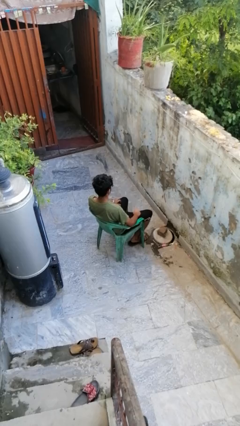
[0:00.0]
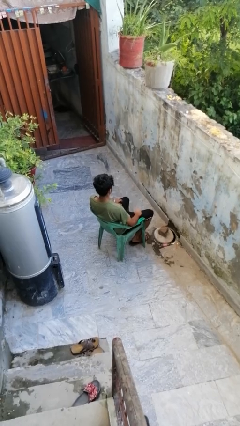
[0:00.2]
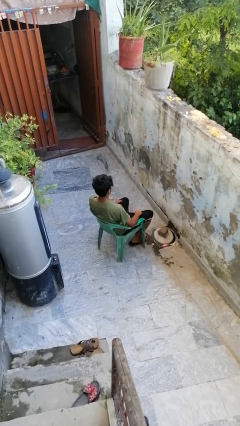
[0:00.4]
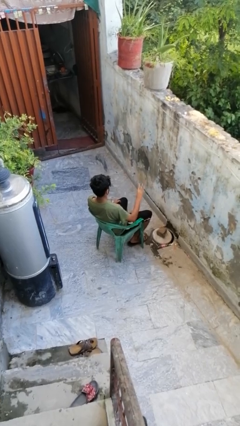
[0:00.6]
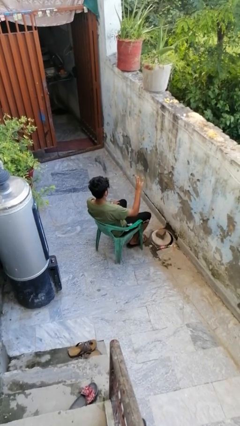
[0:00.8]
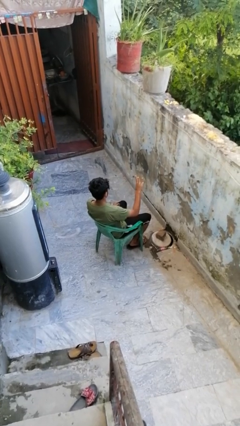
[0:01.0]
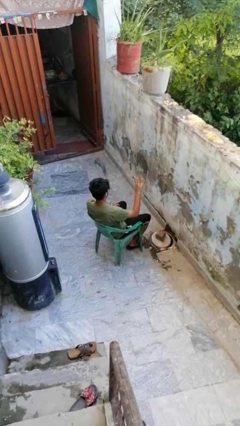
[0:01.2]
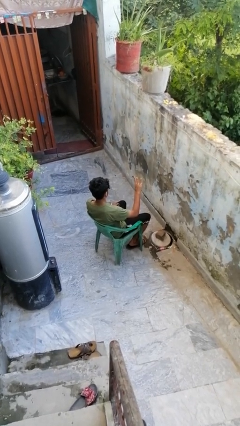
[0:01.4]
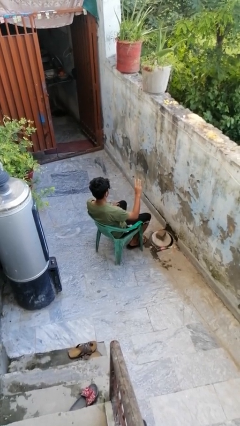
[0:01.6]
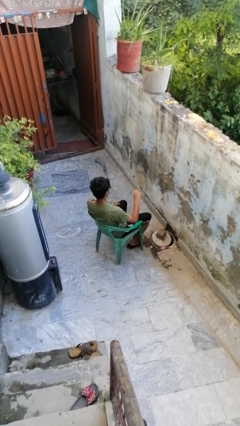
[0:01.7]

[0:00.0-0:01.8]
person gestures number three

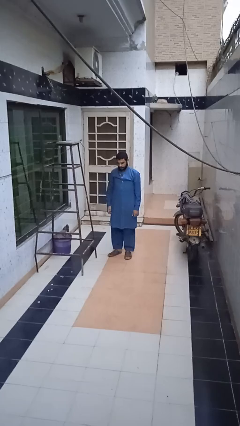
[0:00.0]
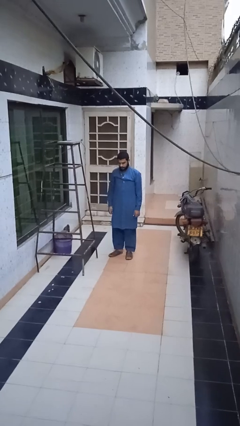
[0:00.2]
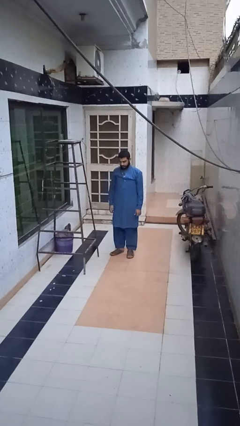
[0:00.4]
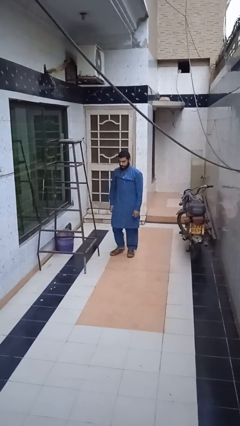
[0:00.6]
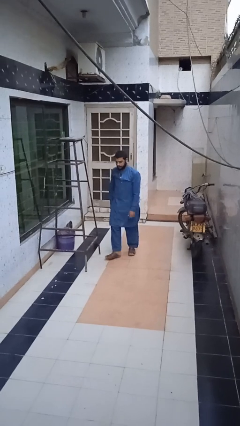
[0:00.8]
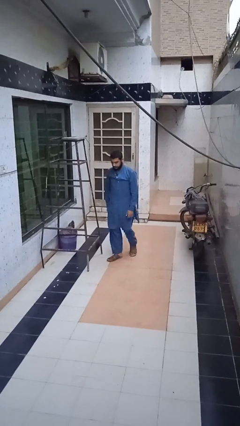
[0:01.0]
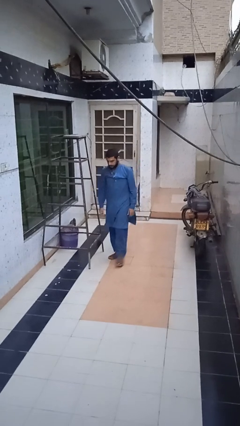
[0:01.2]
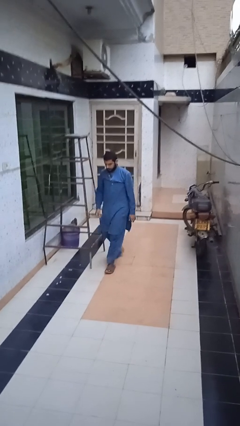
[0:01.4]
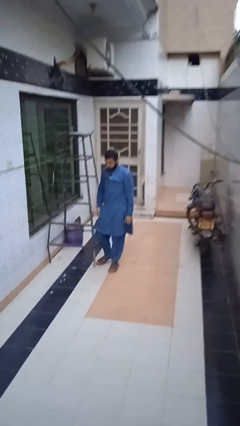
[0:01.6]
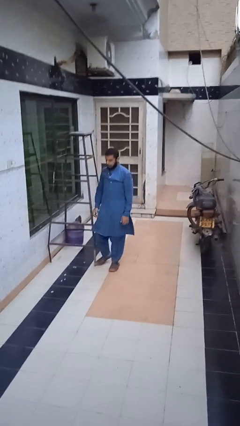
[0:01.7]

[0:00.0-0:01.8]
person trips on object on floor

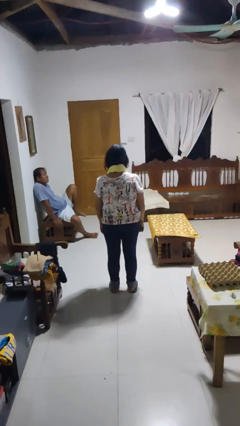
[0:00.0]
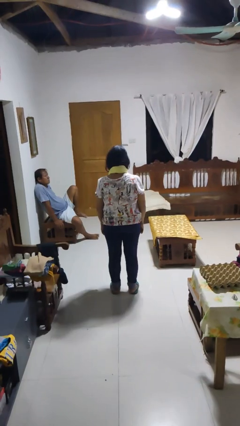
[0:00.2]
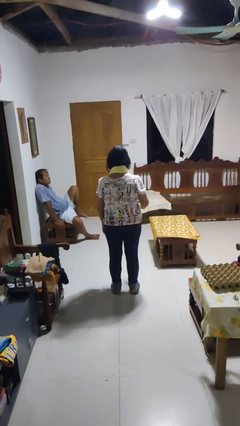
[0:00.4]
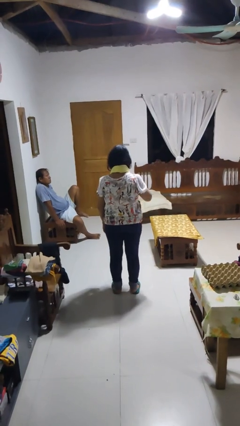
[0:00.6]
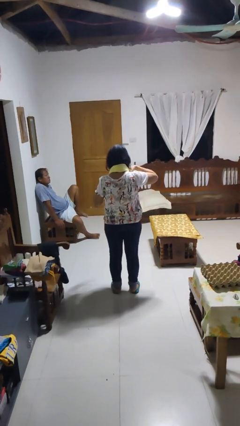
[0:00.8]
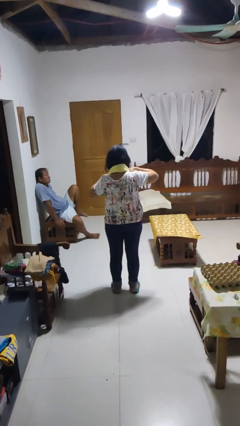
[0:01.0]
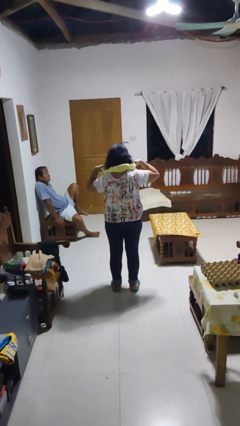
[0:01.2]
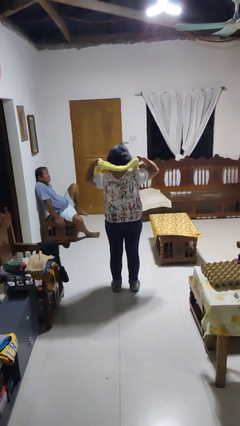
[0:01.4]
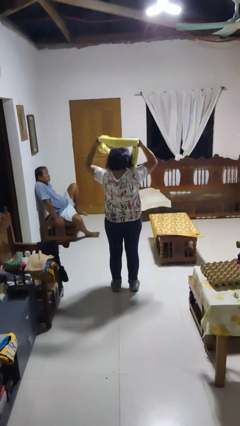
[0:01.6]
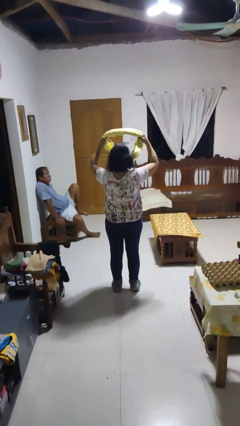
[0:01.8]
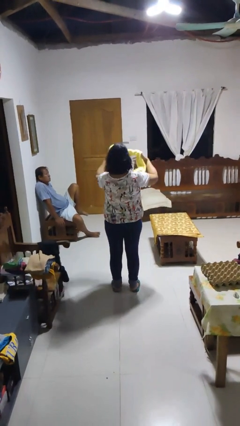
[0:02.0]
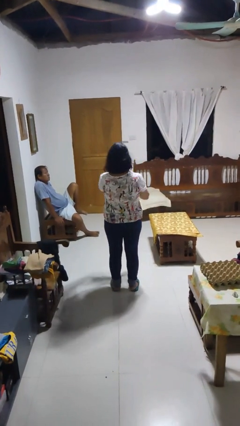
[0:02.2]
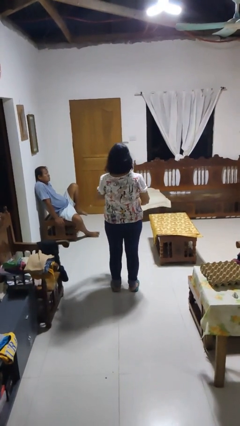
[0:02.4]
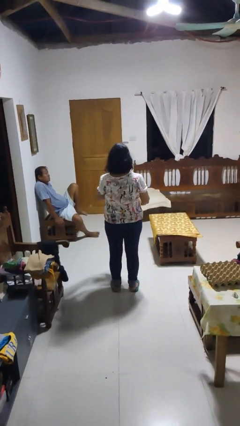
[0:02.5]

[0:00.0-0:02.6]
person takes off scarf

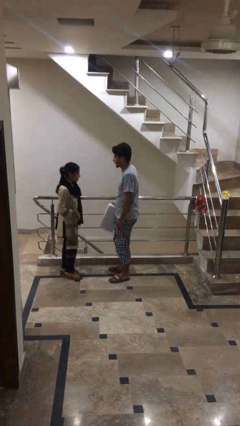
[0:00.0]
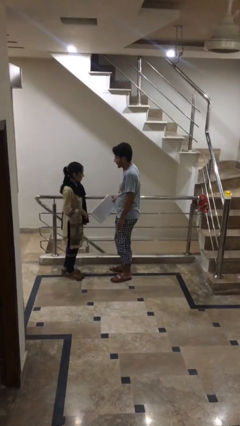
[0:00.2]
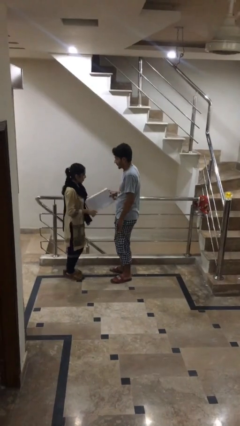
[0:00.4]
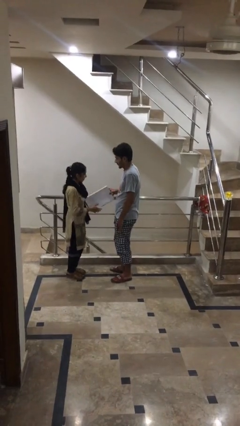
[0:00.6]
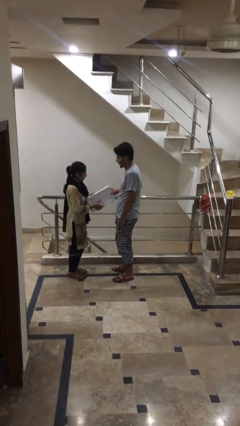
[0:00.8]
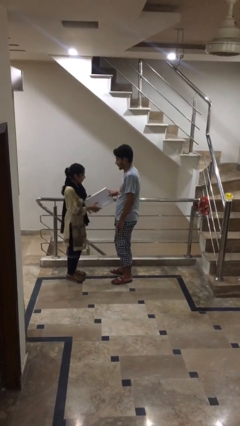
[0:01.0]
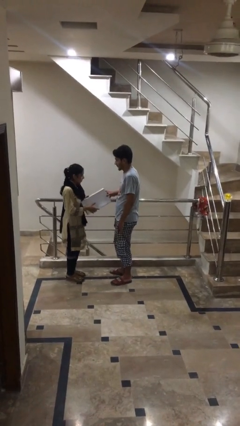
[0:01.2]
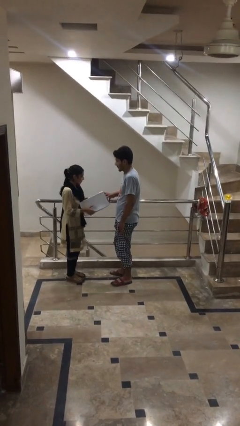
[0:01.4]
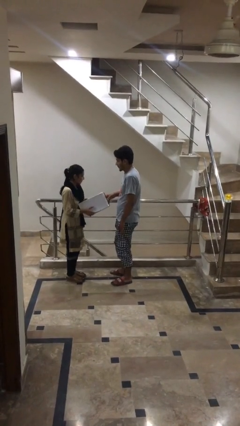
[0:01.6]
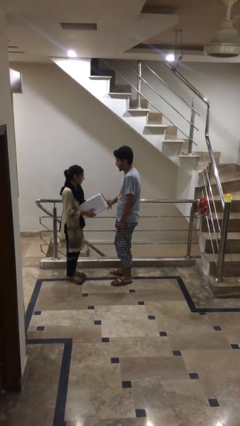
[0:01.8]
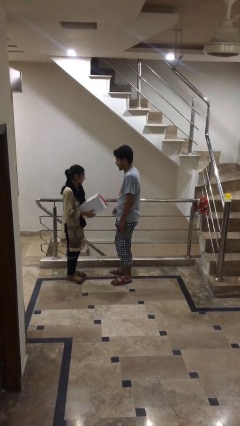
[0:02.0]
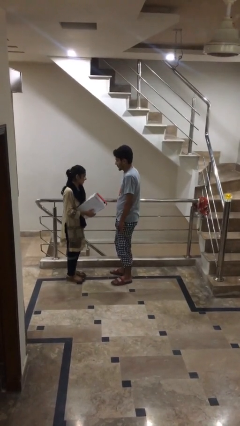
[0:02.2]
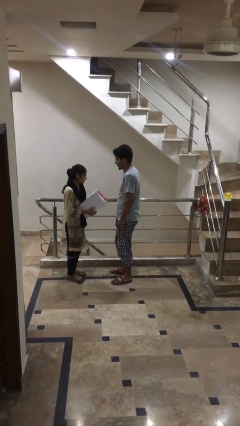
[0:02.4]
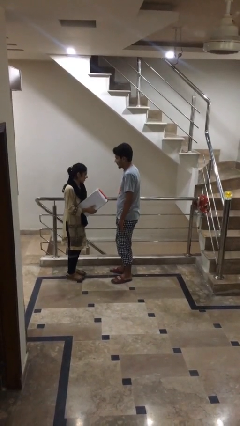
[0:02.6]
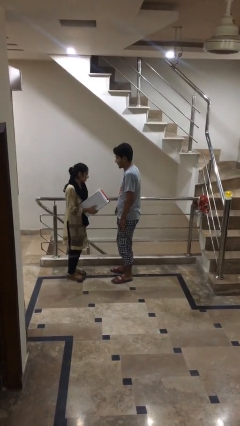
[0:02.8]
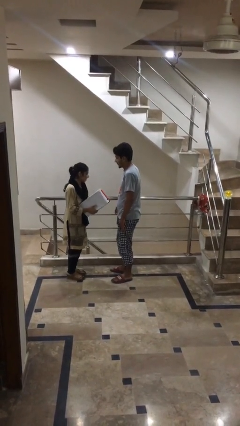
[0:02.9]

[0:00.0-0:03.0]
person transfers object to person

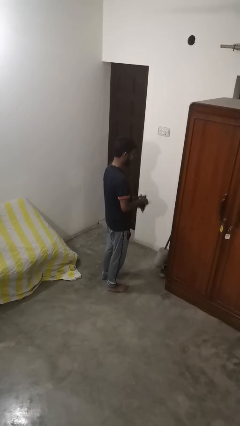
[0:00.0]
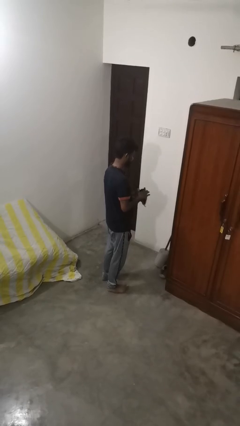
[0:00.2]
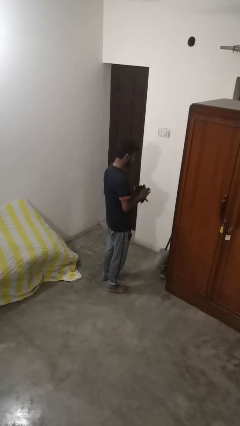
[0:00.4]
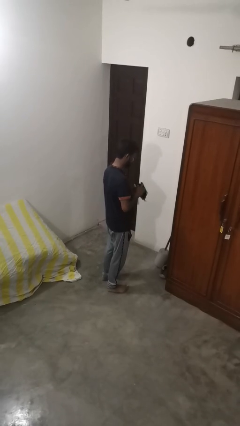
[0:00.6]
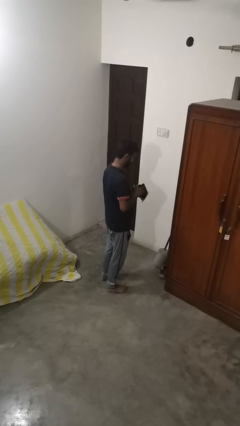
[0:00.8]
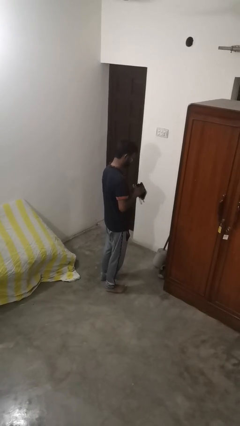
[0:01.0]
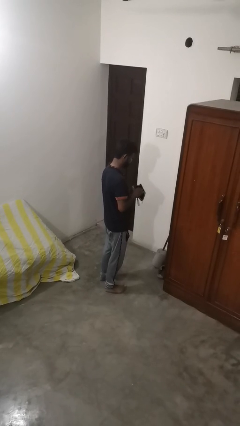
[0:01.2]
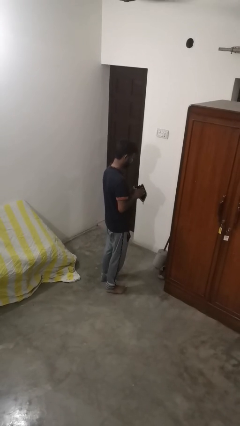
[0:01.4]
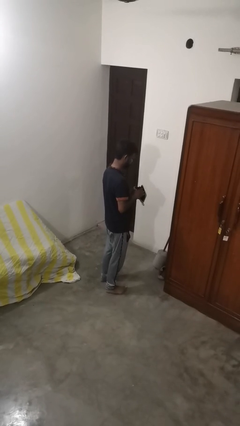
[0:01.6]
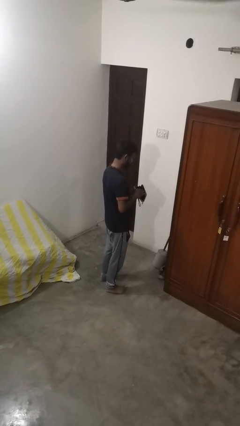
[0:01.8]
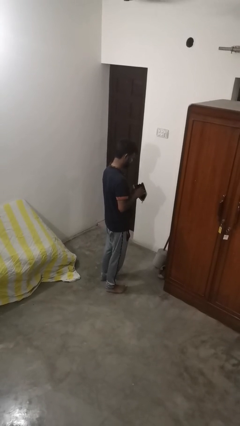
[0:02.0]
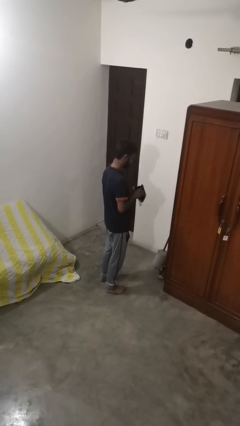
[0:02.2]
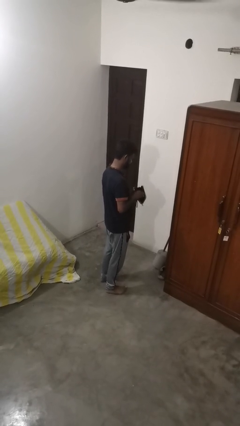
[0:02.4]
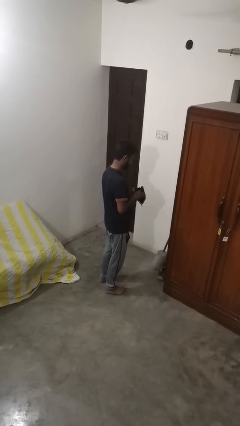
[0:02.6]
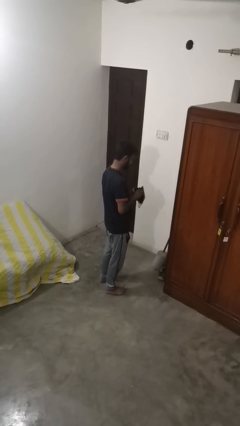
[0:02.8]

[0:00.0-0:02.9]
person searches in purse

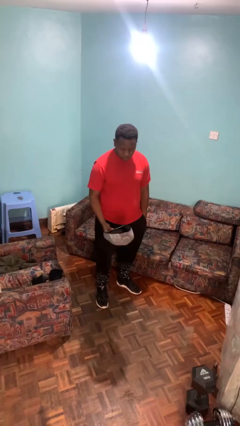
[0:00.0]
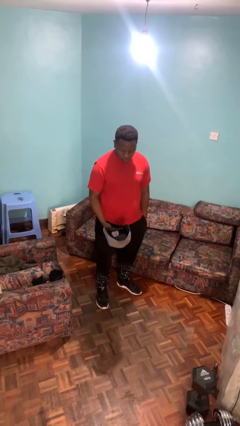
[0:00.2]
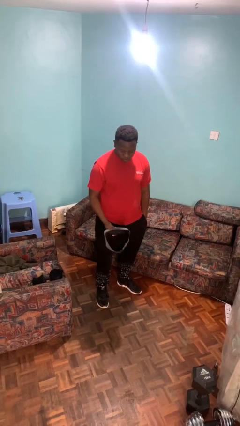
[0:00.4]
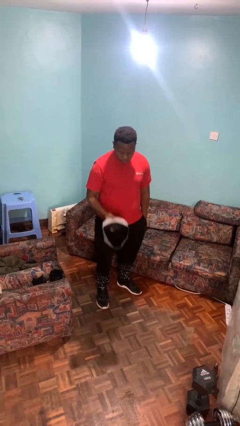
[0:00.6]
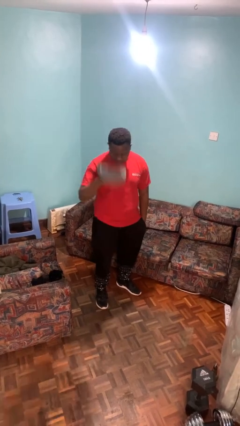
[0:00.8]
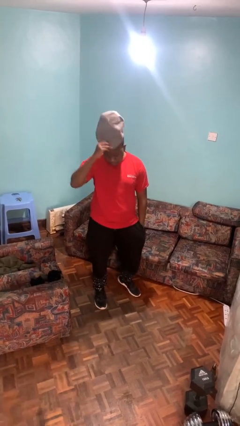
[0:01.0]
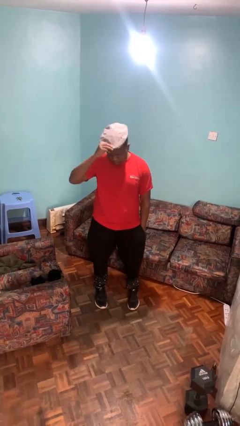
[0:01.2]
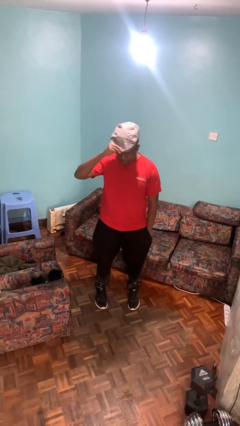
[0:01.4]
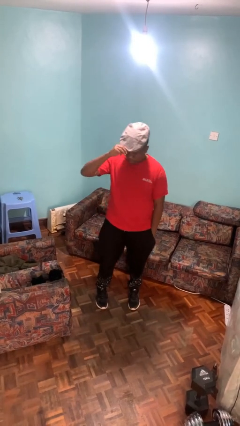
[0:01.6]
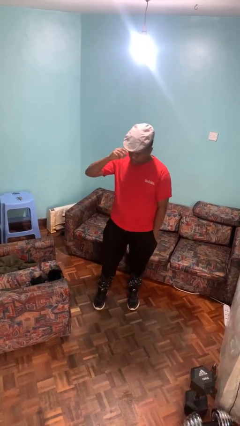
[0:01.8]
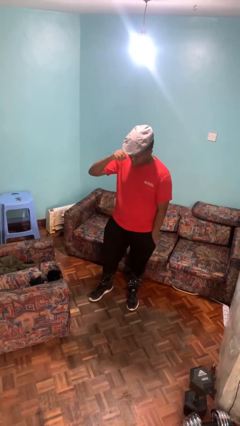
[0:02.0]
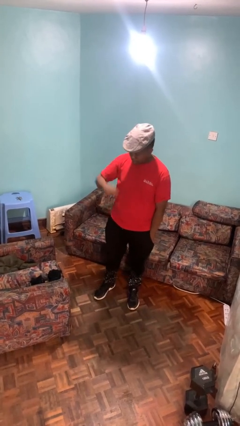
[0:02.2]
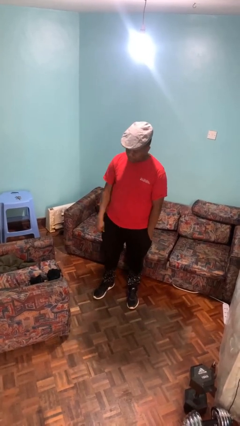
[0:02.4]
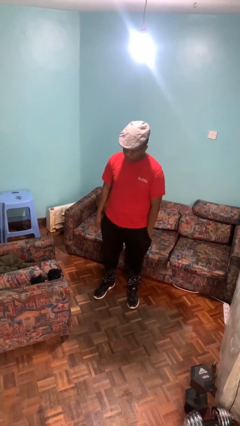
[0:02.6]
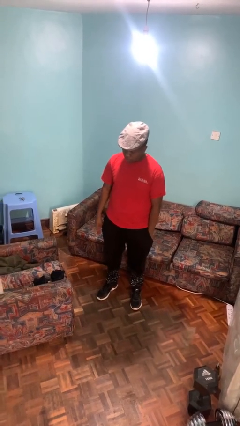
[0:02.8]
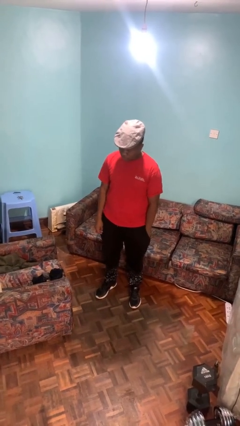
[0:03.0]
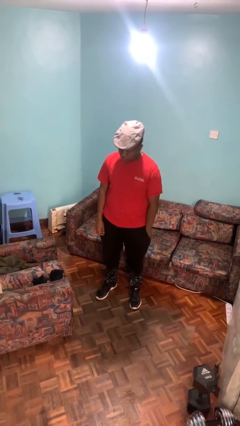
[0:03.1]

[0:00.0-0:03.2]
person puts on hat

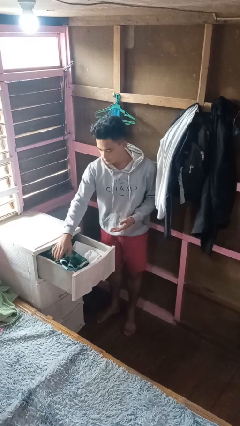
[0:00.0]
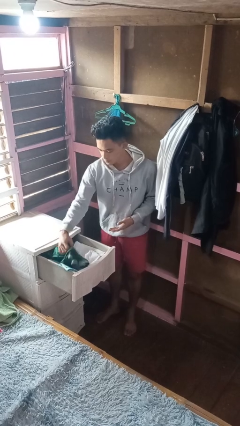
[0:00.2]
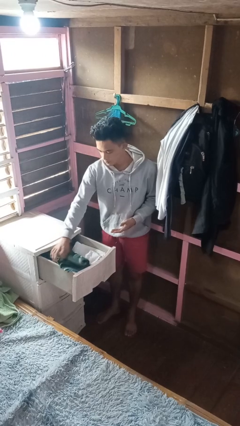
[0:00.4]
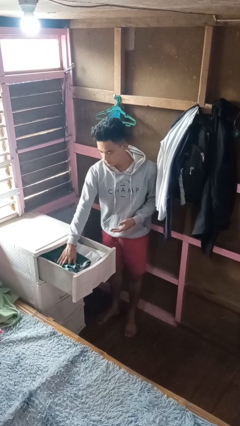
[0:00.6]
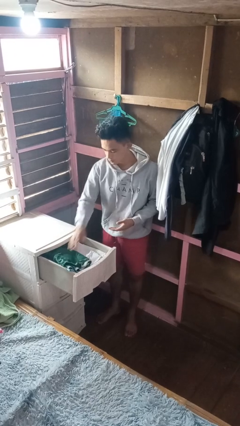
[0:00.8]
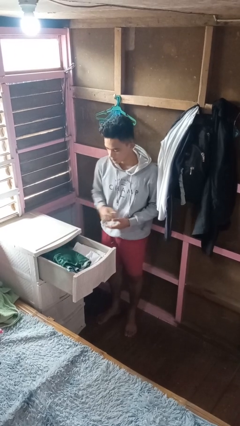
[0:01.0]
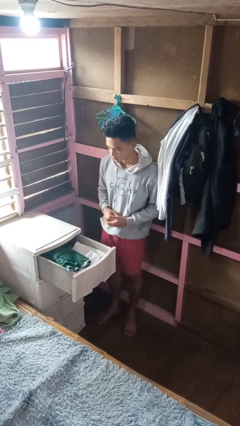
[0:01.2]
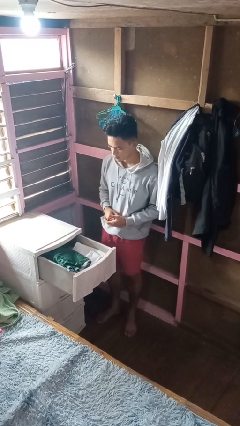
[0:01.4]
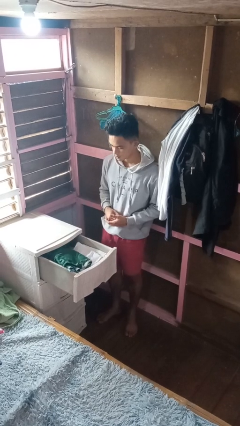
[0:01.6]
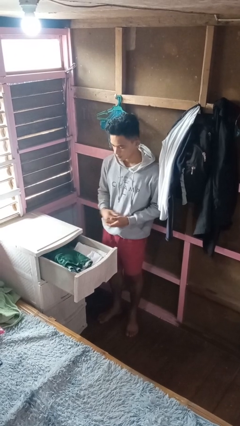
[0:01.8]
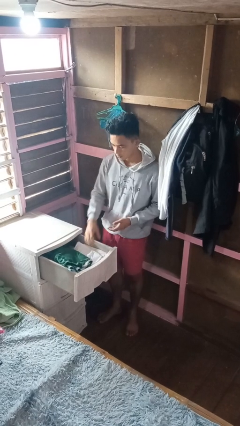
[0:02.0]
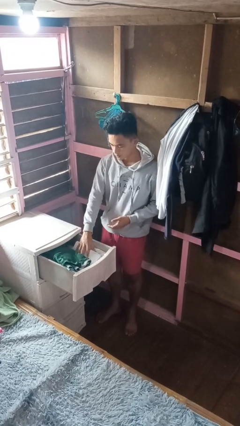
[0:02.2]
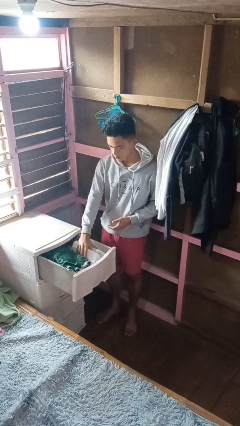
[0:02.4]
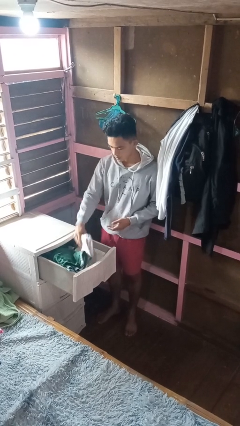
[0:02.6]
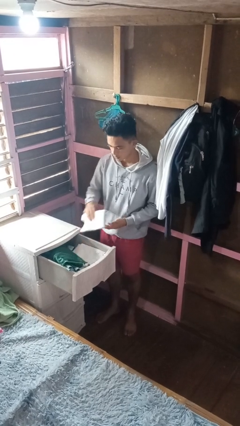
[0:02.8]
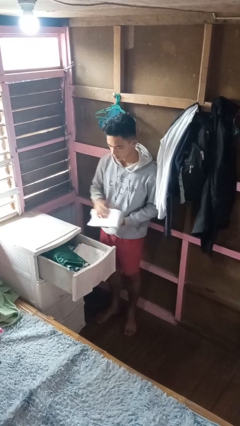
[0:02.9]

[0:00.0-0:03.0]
person puts clothes into dresser
